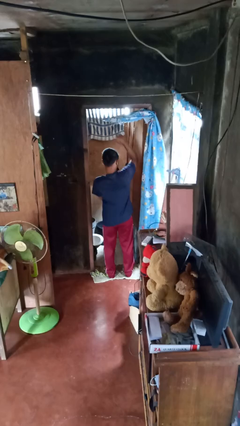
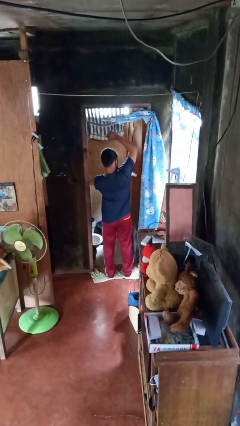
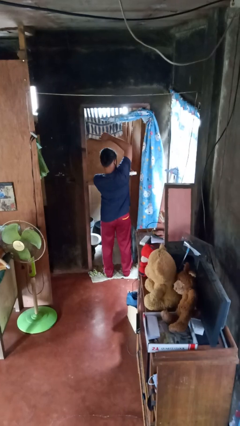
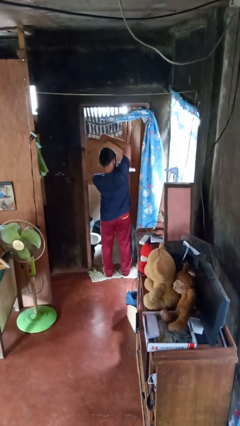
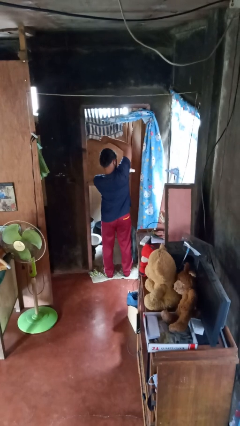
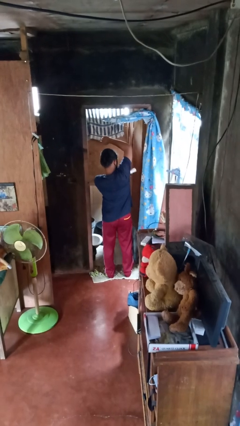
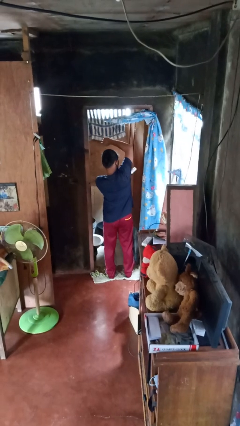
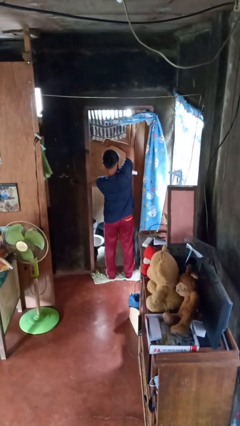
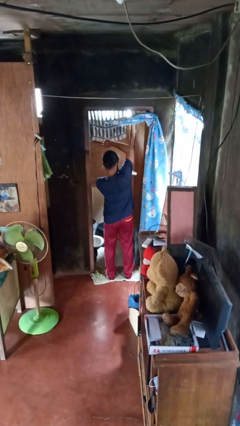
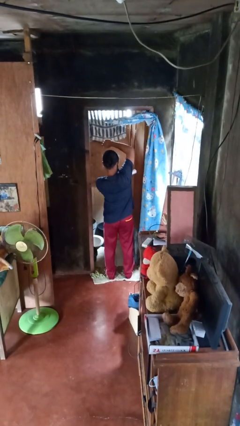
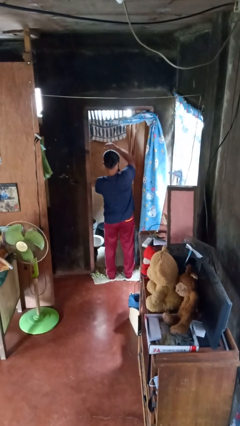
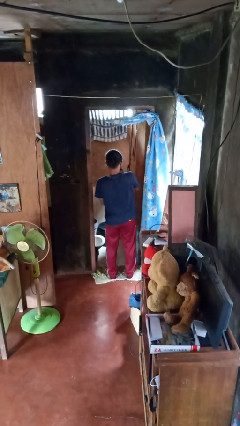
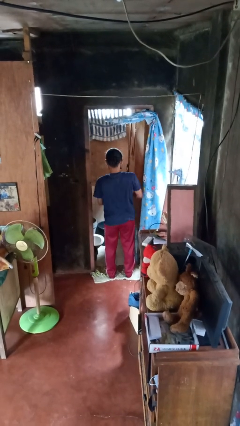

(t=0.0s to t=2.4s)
person applies deodorant

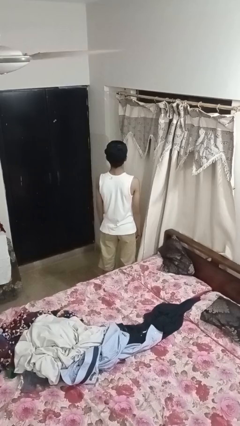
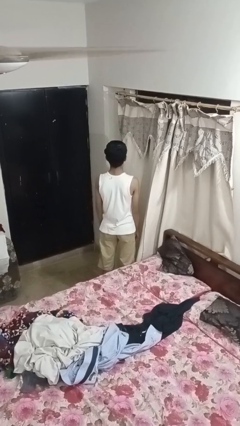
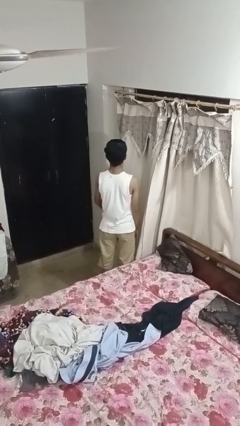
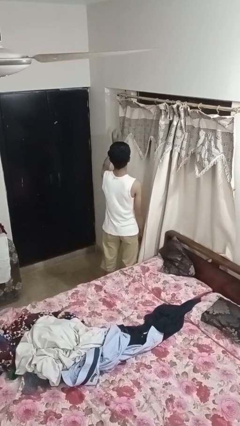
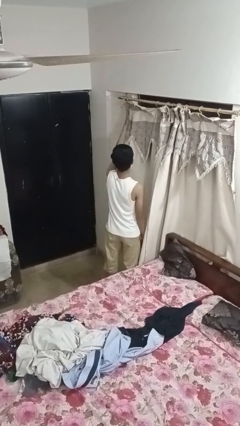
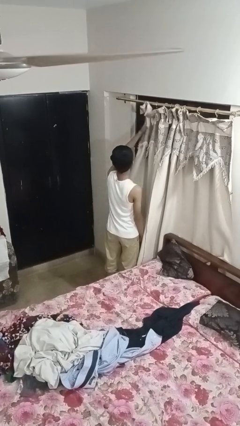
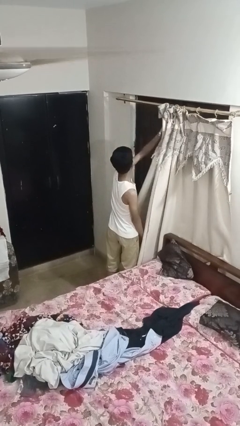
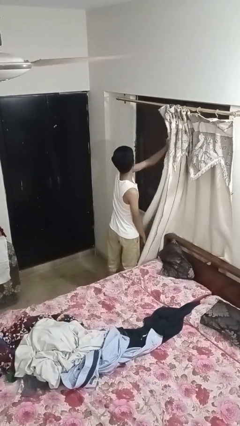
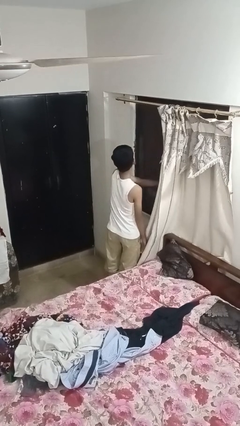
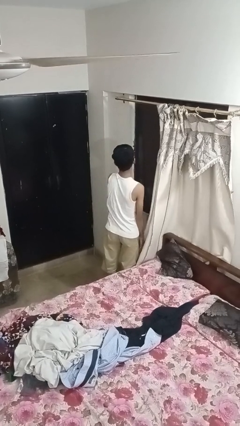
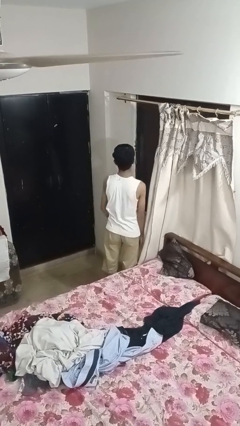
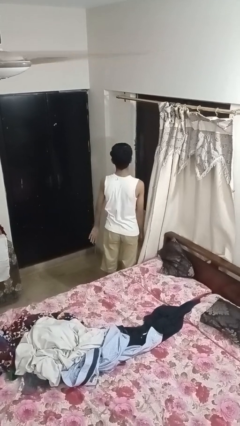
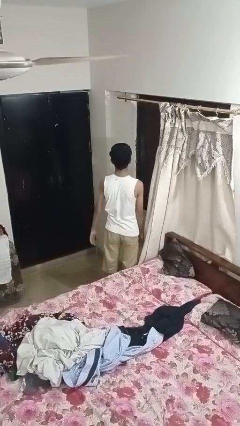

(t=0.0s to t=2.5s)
person opens curtains

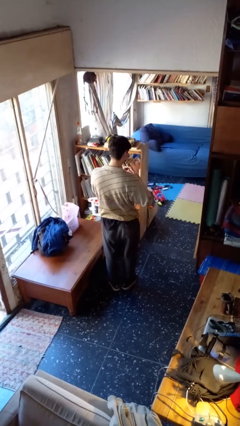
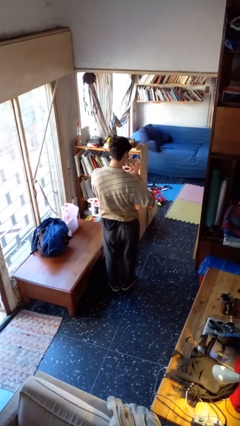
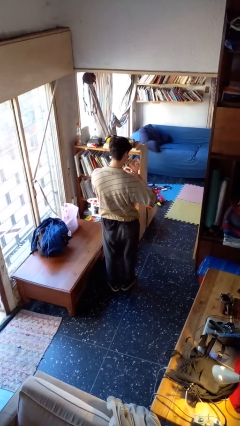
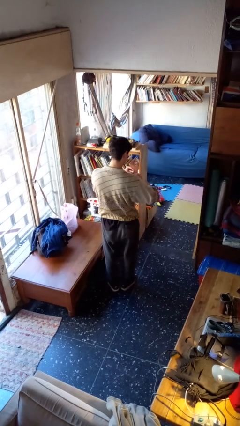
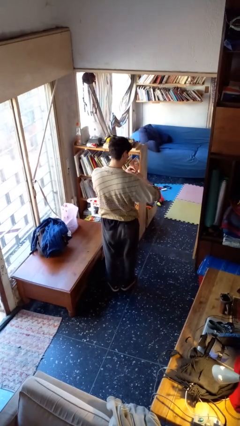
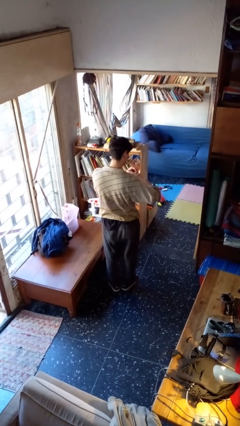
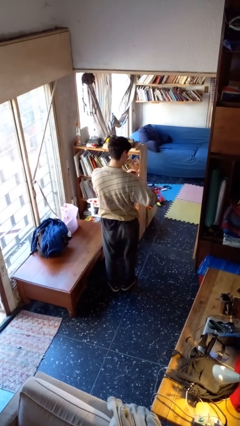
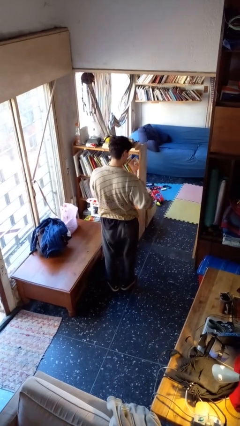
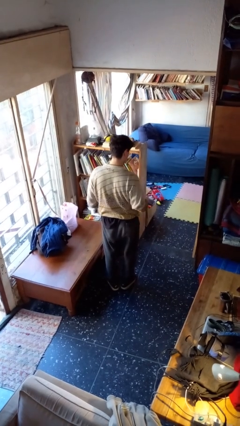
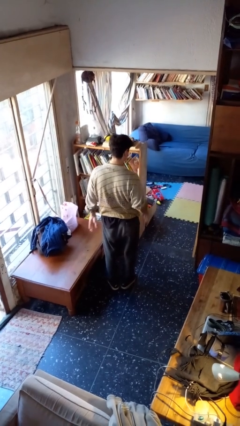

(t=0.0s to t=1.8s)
person puts on ring

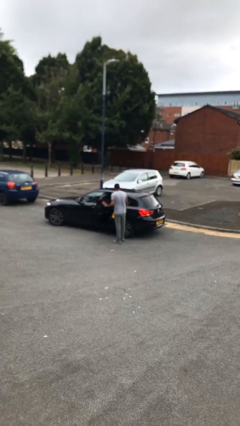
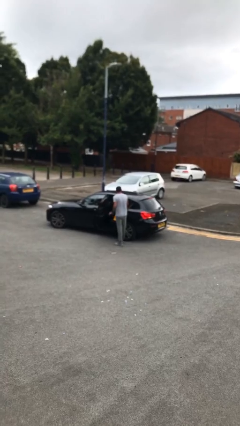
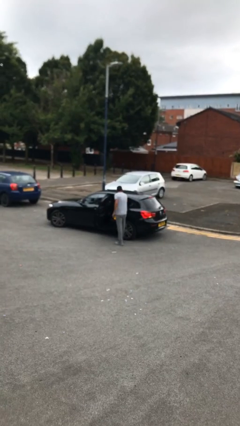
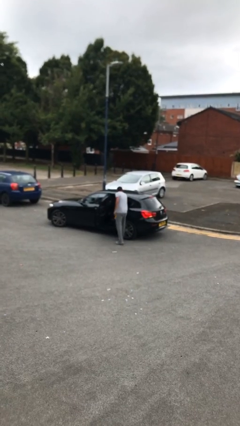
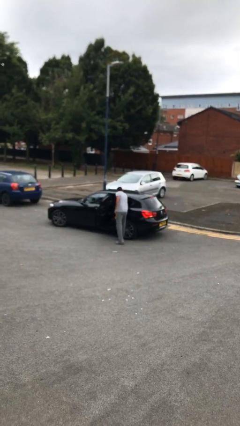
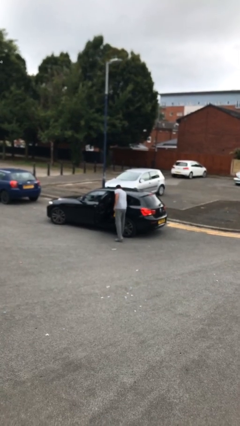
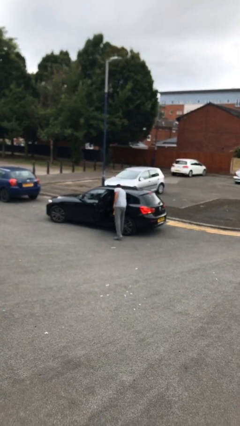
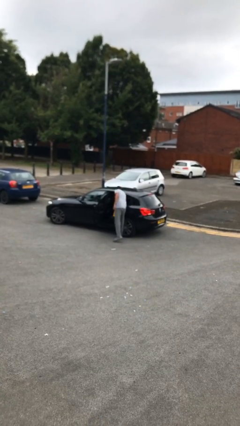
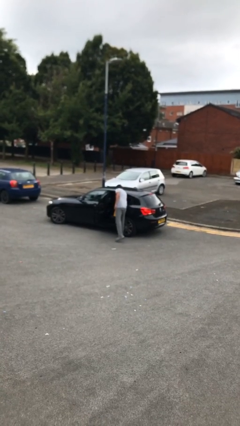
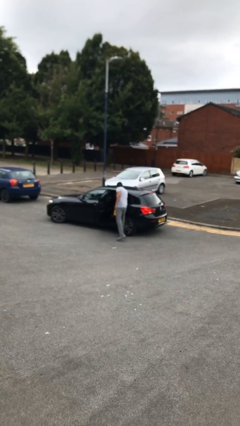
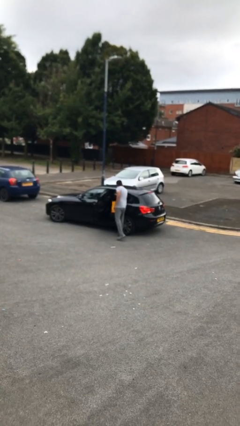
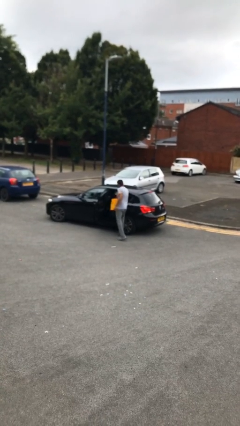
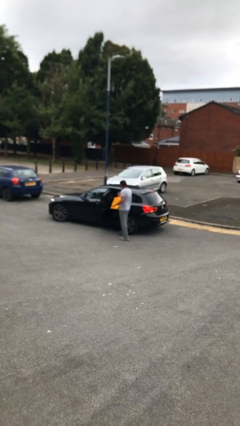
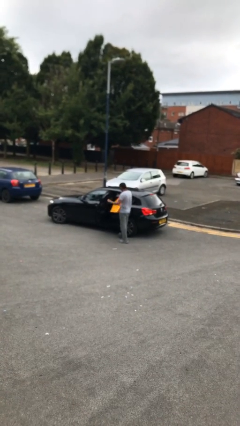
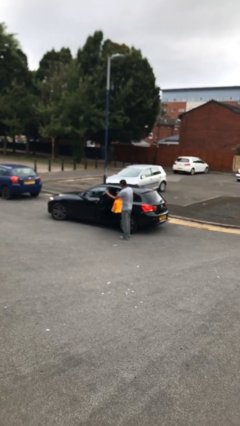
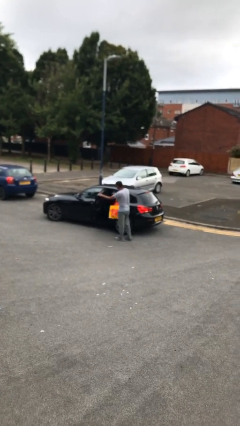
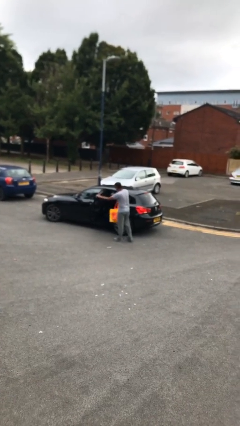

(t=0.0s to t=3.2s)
person unloads car

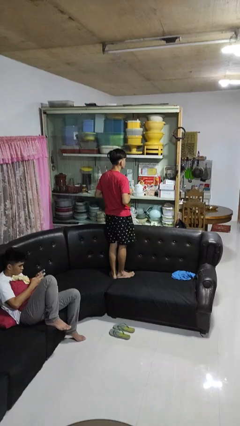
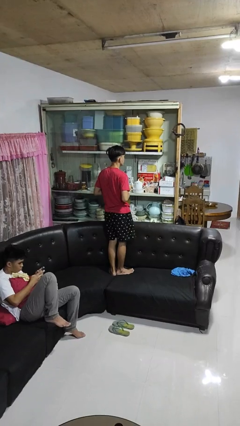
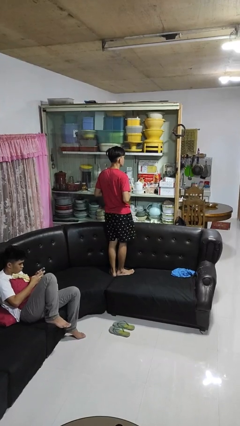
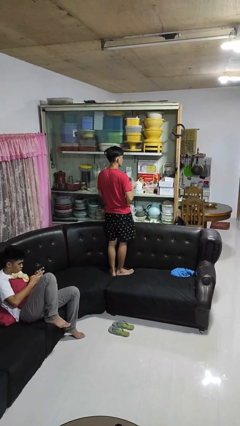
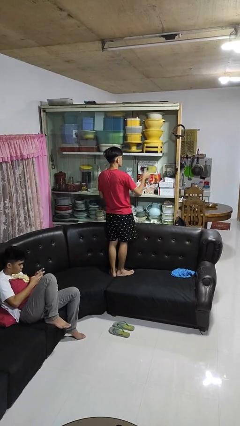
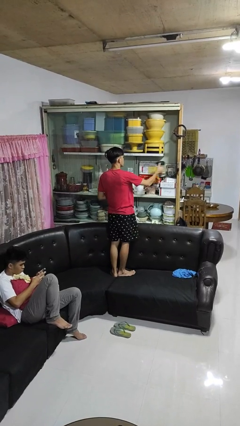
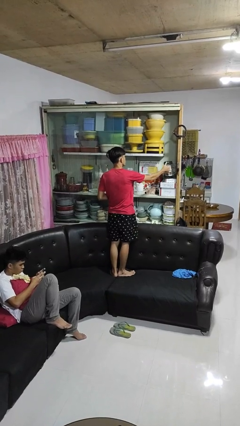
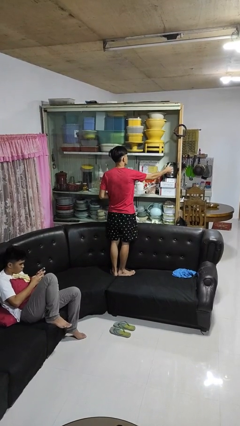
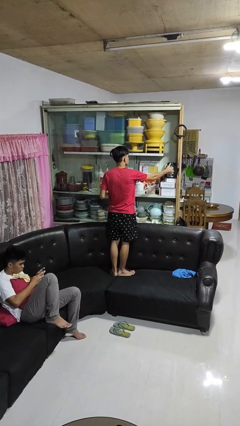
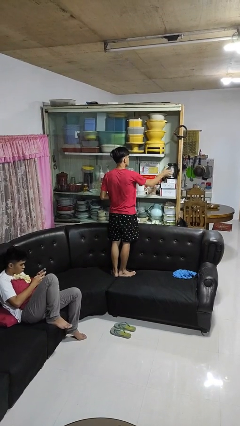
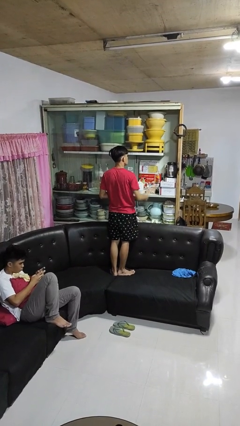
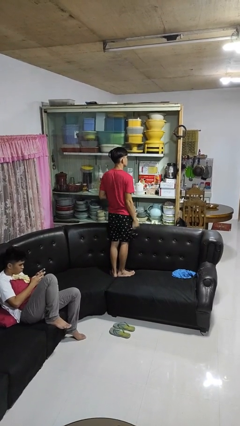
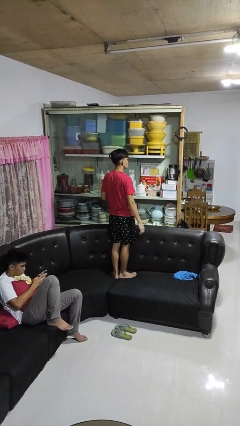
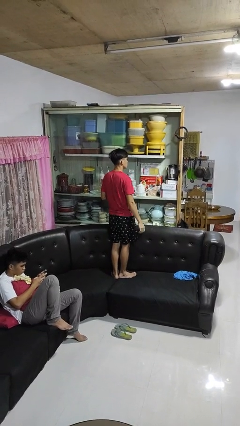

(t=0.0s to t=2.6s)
person puts down object into cabinet

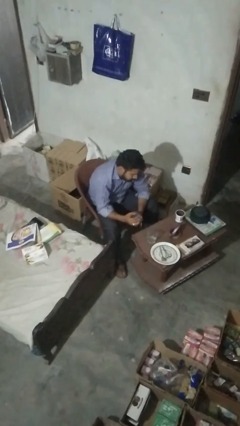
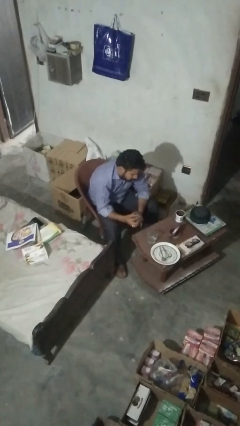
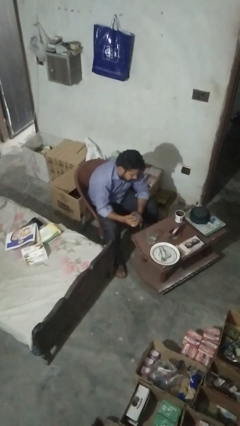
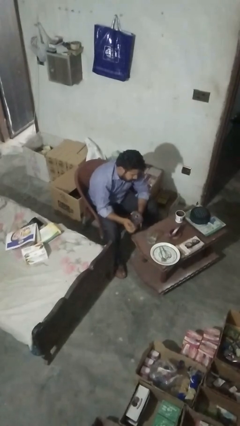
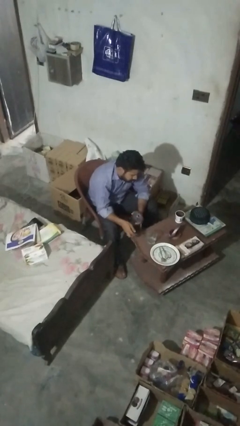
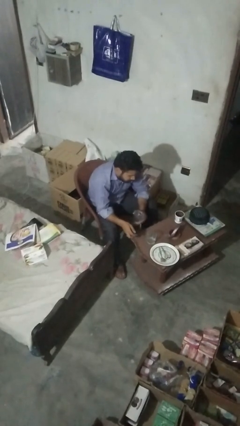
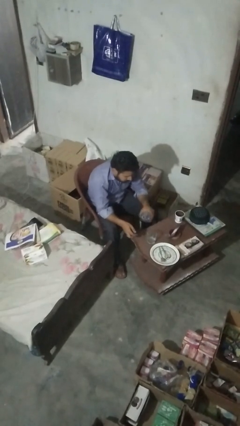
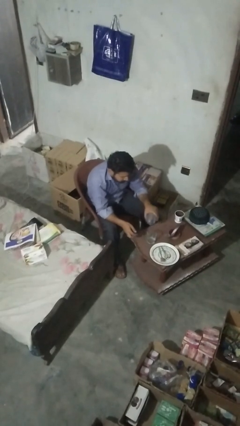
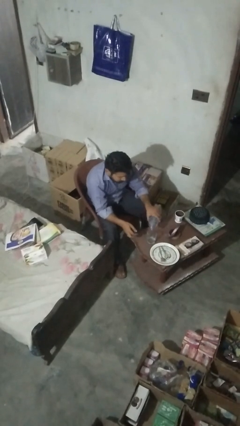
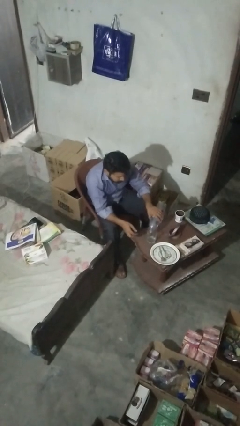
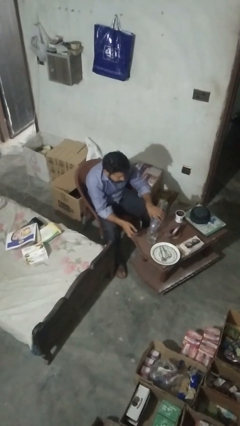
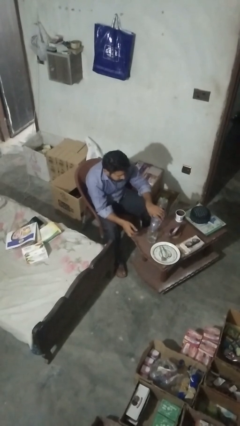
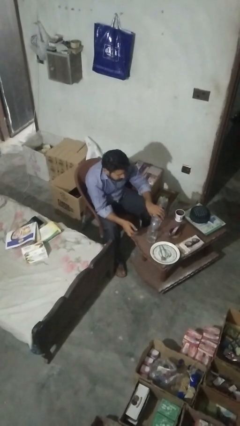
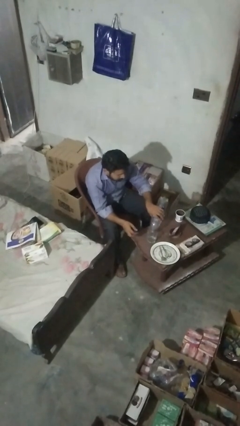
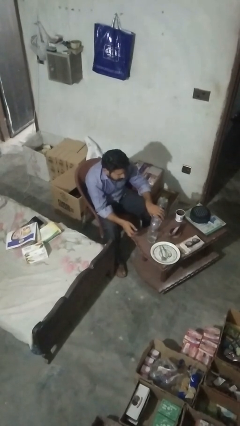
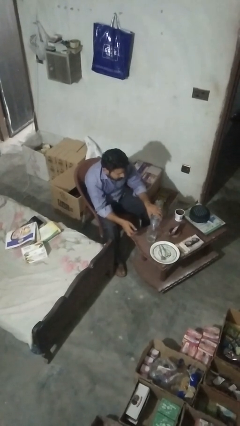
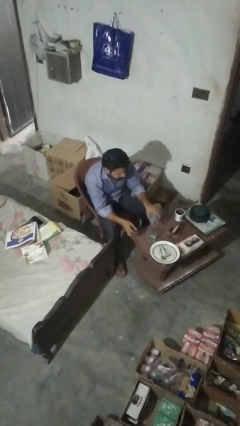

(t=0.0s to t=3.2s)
person pours liquid into cup

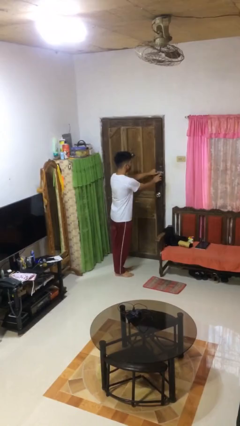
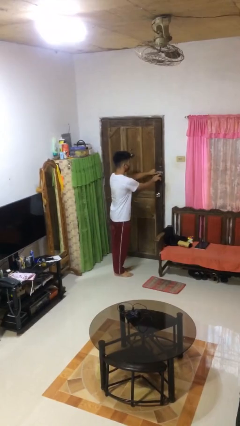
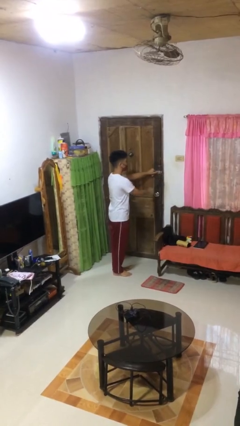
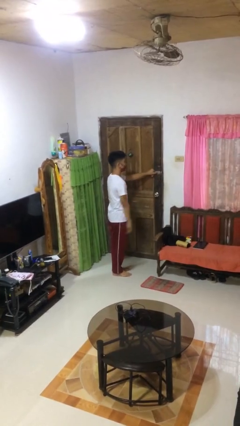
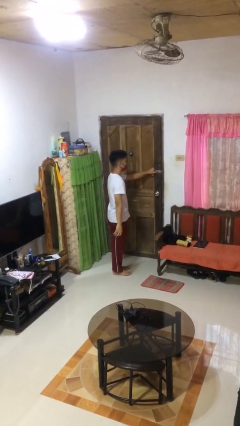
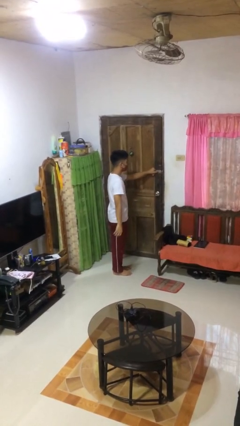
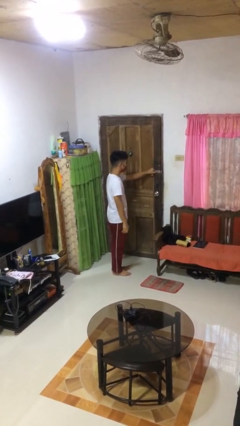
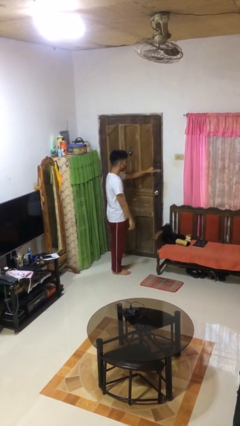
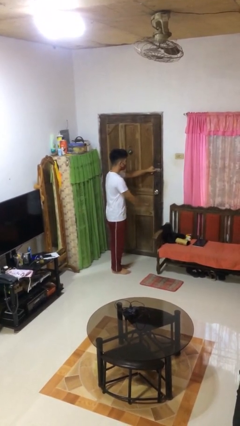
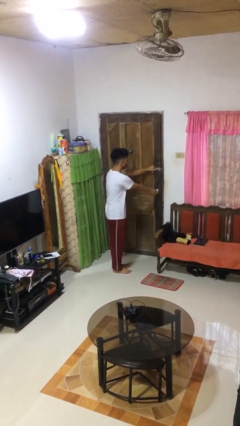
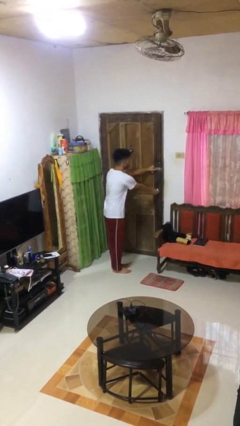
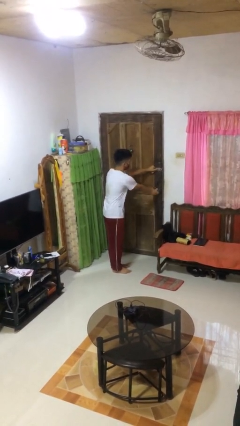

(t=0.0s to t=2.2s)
person unlocks door with keys
